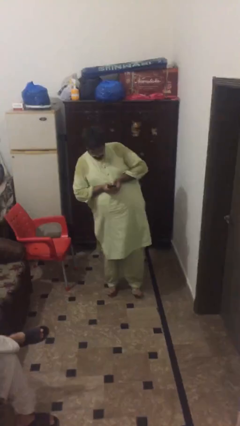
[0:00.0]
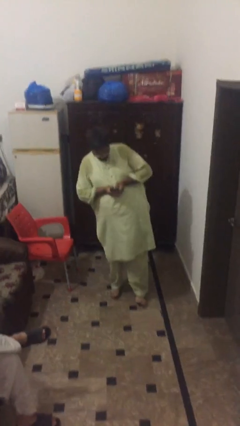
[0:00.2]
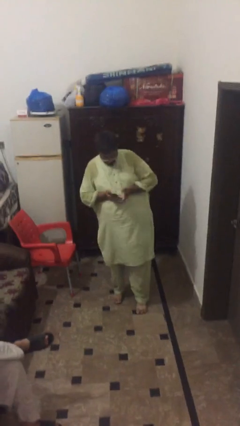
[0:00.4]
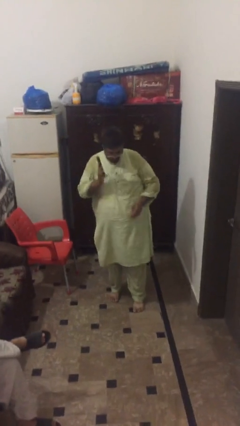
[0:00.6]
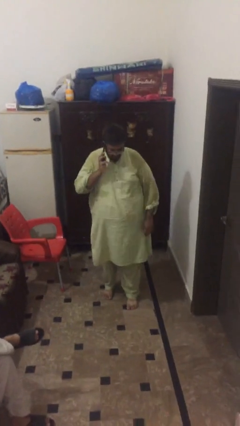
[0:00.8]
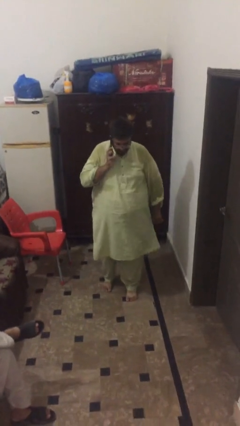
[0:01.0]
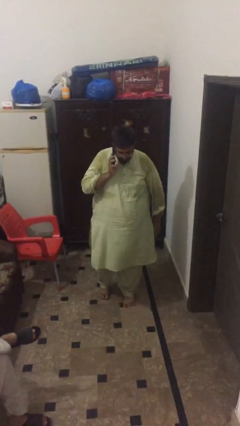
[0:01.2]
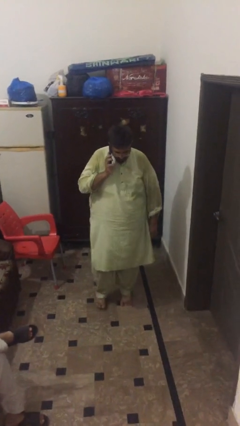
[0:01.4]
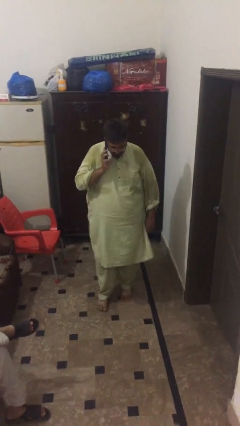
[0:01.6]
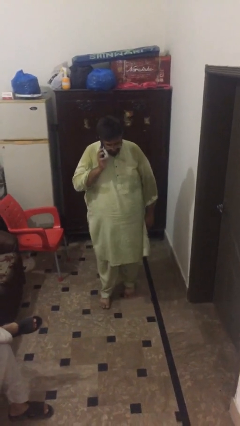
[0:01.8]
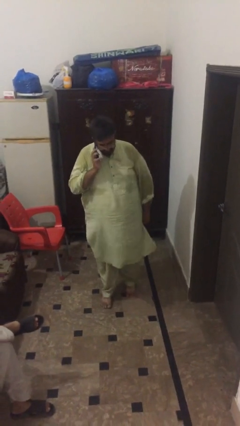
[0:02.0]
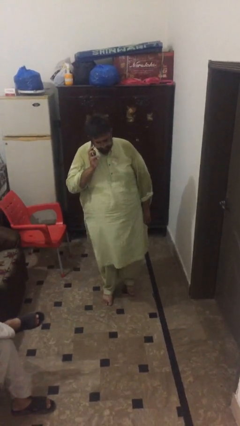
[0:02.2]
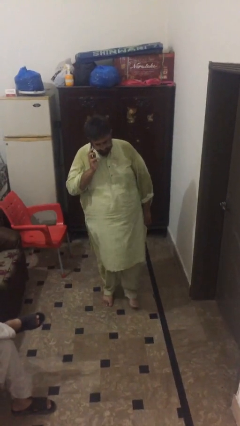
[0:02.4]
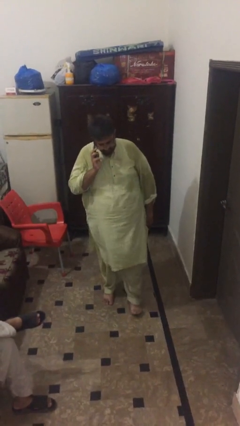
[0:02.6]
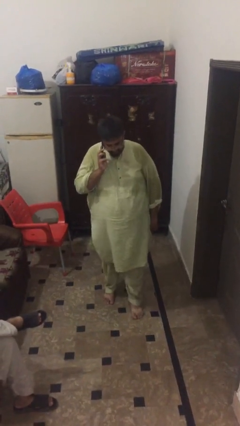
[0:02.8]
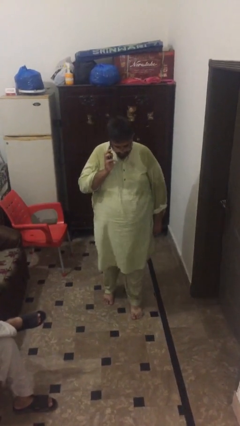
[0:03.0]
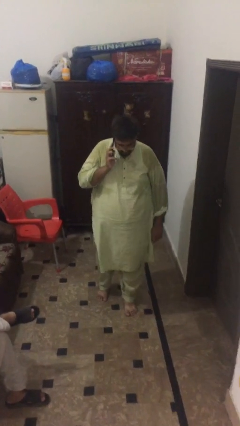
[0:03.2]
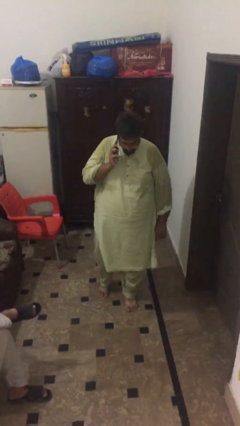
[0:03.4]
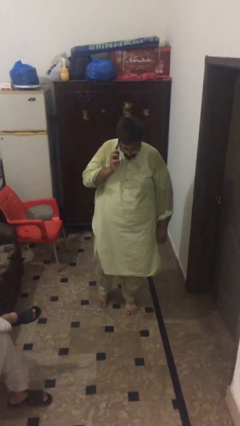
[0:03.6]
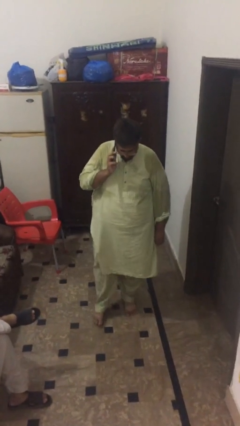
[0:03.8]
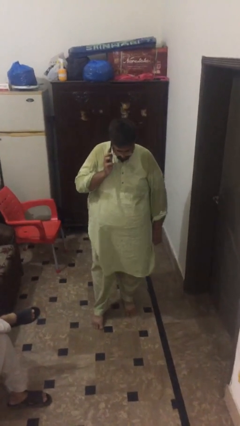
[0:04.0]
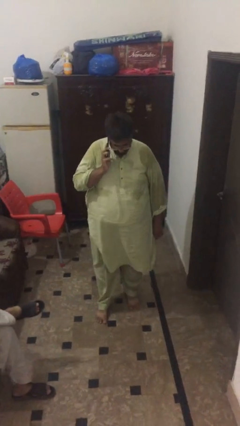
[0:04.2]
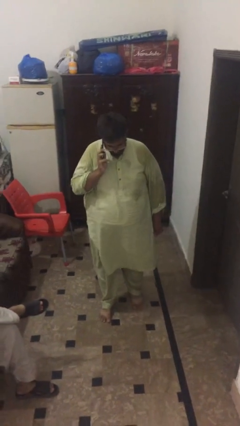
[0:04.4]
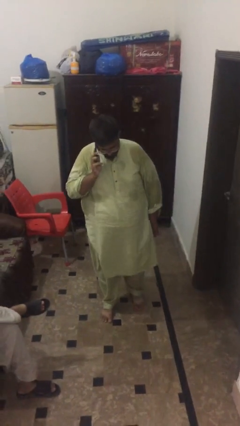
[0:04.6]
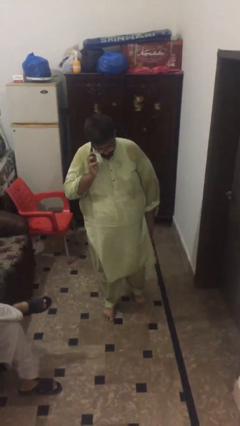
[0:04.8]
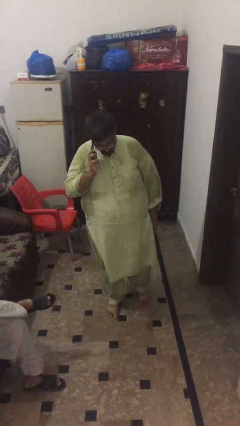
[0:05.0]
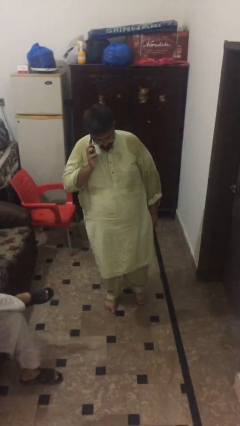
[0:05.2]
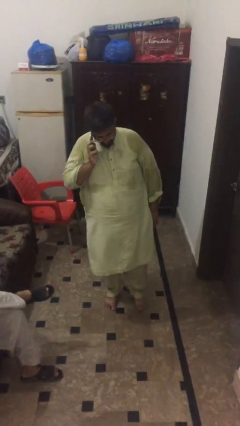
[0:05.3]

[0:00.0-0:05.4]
person talks on phone

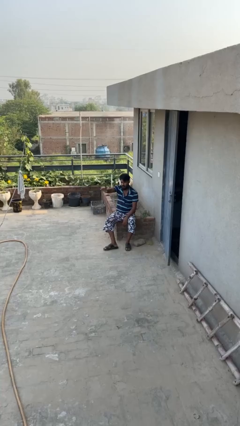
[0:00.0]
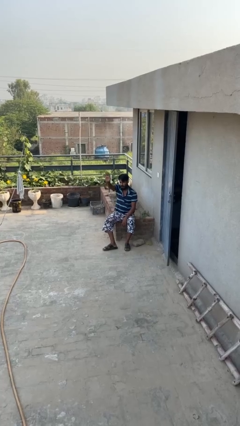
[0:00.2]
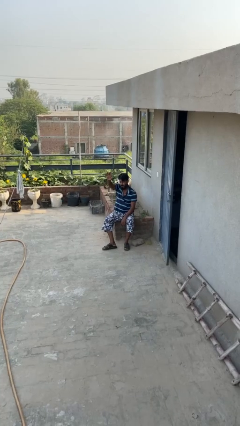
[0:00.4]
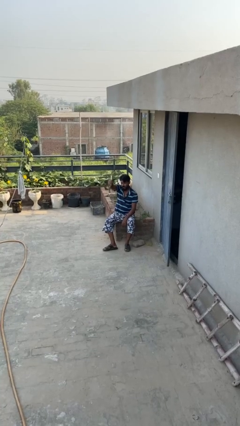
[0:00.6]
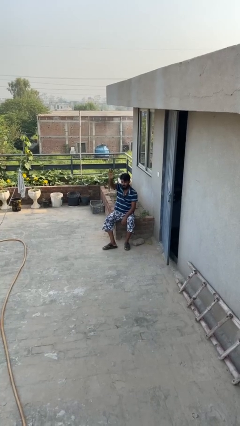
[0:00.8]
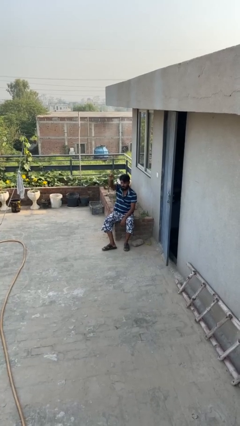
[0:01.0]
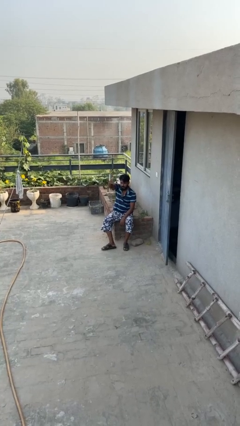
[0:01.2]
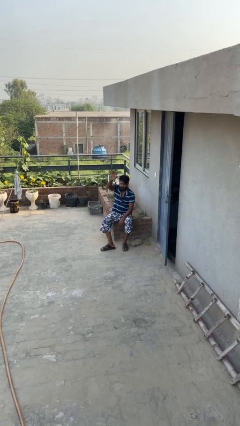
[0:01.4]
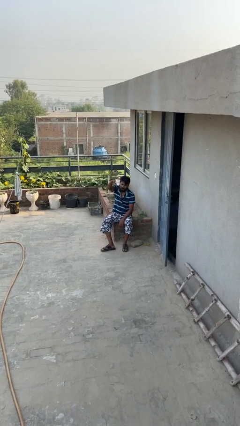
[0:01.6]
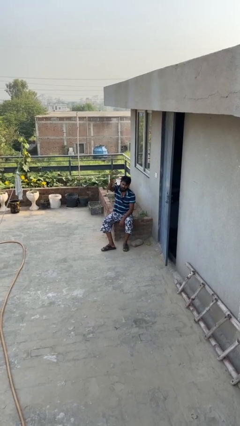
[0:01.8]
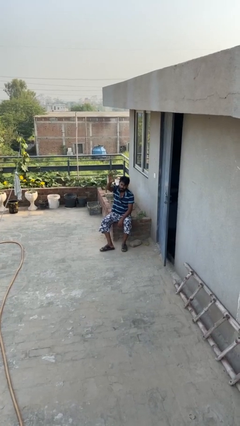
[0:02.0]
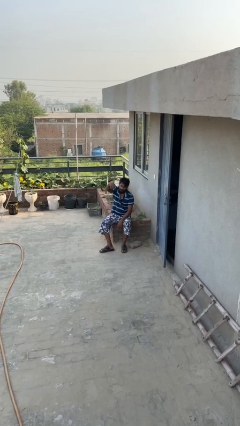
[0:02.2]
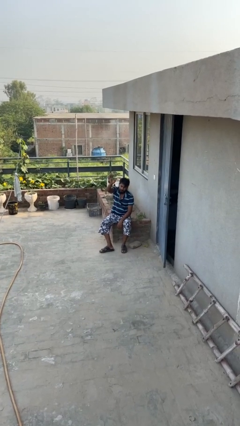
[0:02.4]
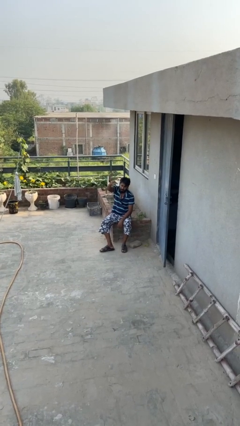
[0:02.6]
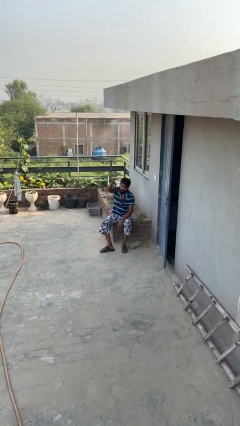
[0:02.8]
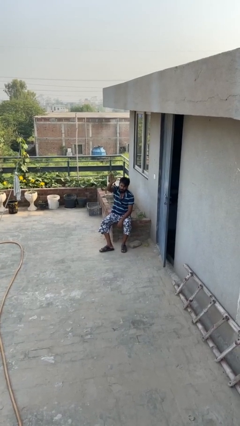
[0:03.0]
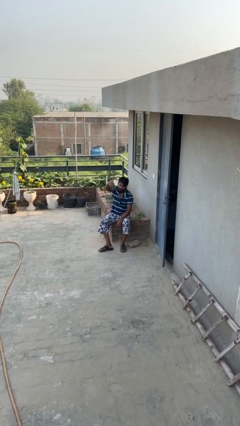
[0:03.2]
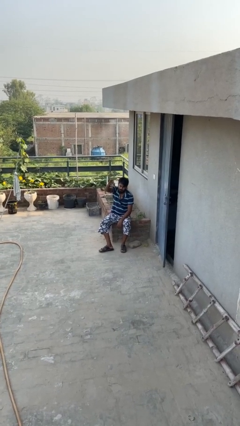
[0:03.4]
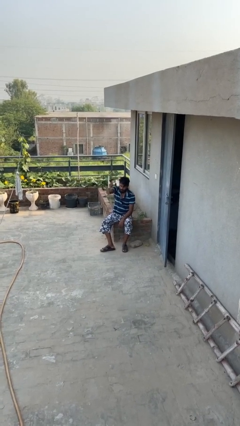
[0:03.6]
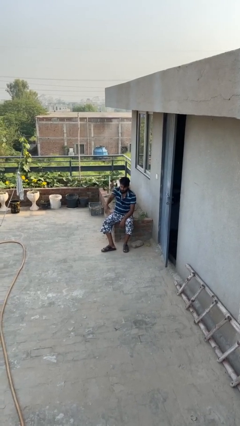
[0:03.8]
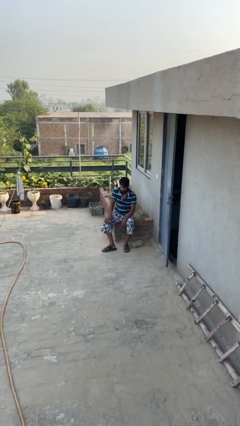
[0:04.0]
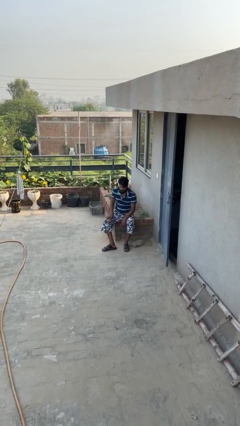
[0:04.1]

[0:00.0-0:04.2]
person gestures come here

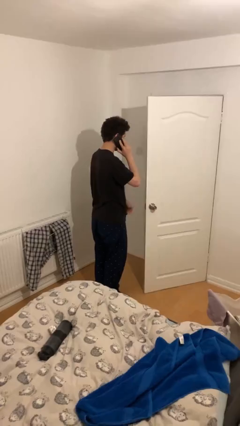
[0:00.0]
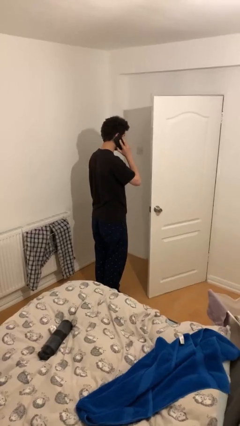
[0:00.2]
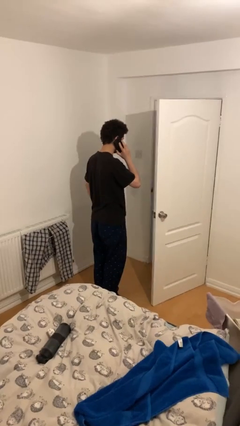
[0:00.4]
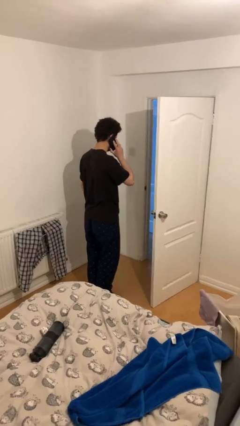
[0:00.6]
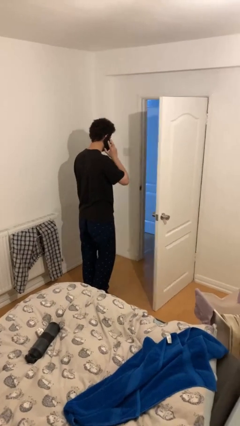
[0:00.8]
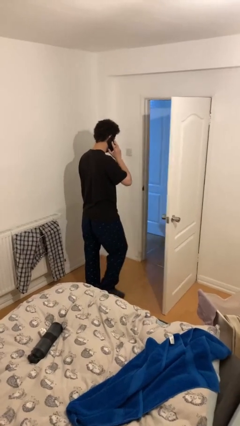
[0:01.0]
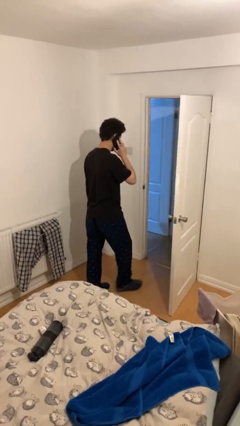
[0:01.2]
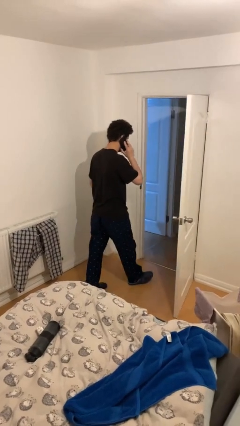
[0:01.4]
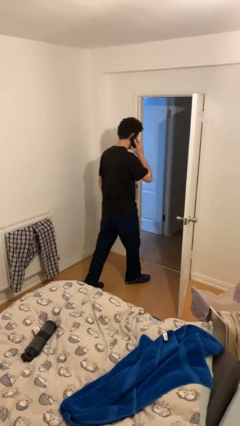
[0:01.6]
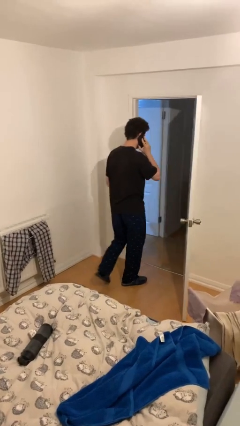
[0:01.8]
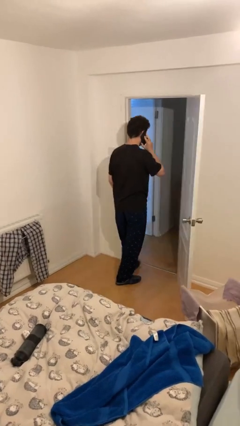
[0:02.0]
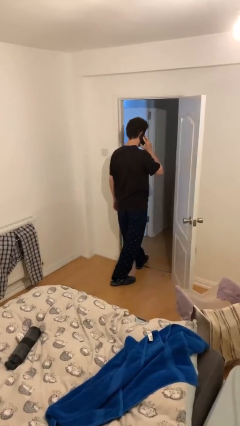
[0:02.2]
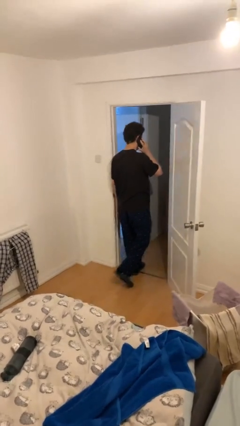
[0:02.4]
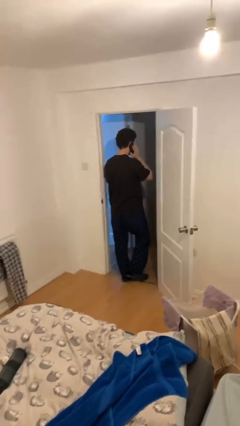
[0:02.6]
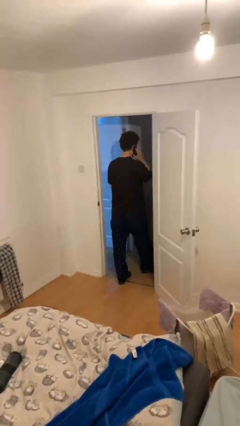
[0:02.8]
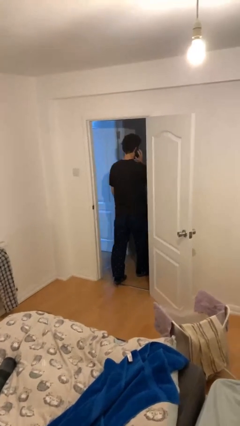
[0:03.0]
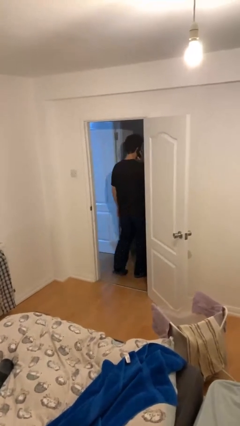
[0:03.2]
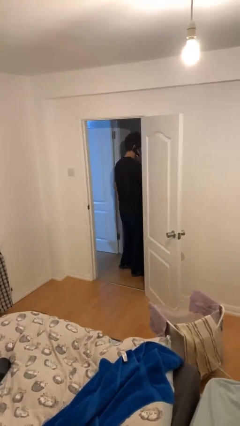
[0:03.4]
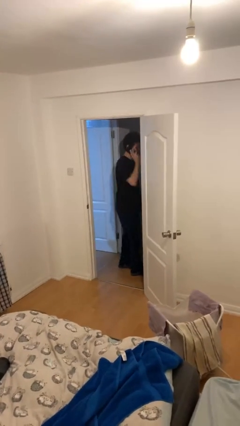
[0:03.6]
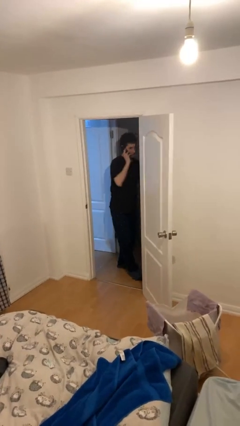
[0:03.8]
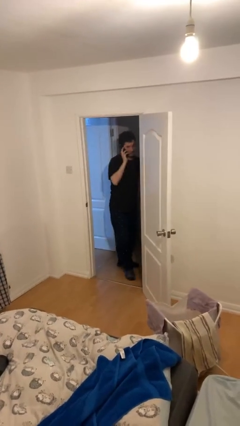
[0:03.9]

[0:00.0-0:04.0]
person exits scene through structure

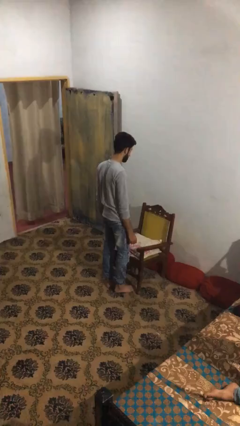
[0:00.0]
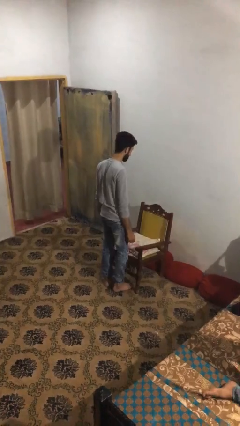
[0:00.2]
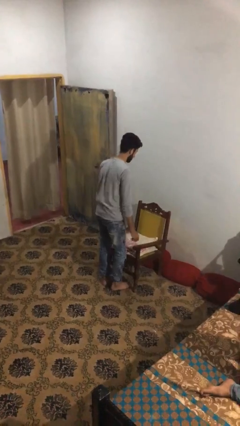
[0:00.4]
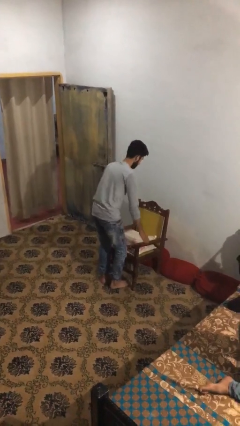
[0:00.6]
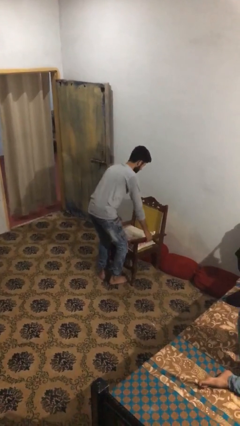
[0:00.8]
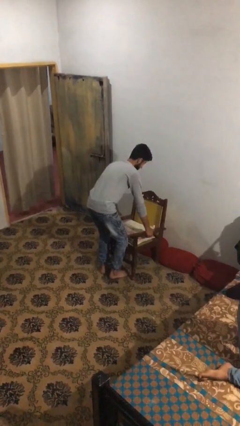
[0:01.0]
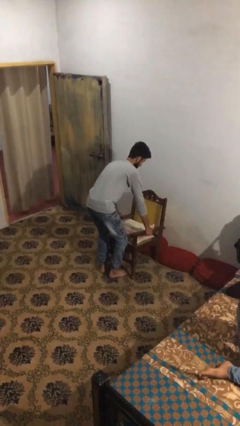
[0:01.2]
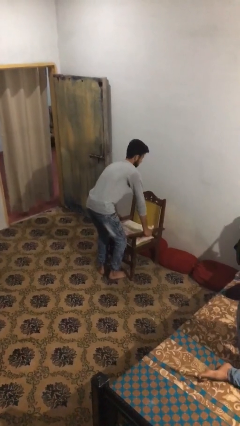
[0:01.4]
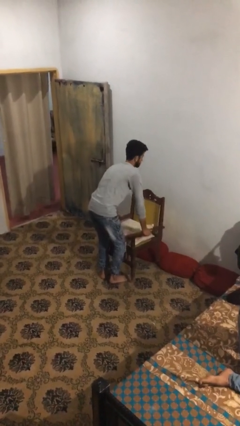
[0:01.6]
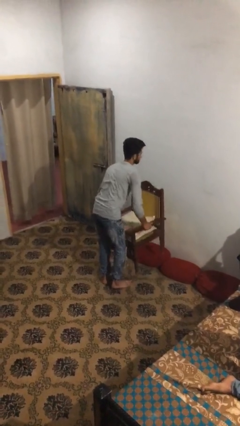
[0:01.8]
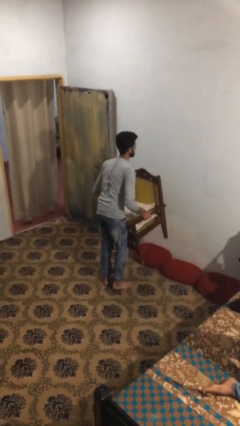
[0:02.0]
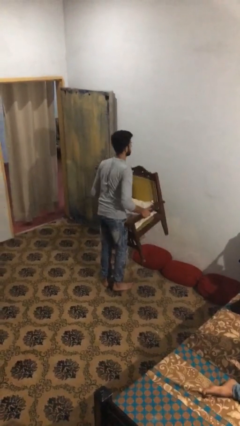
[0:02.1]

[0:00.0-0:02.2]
person picks up object from floor

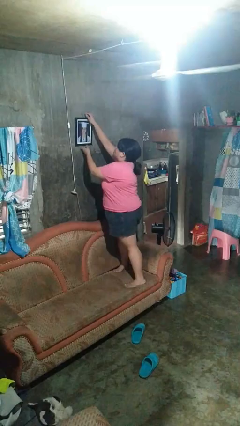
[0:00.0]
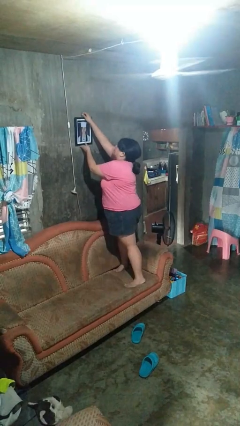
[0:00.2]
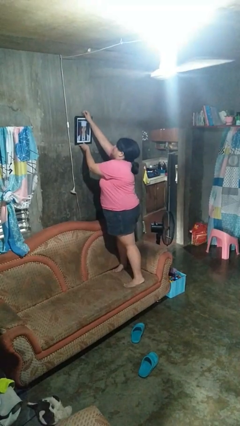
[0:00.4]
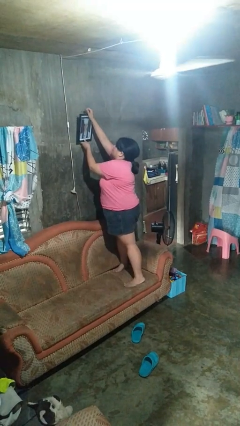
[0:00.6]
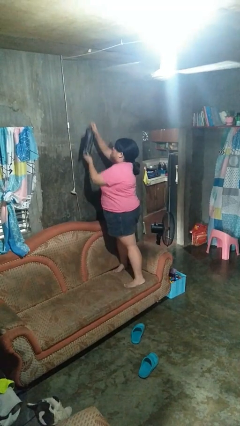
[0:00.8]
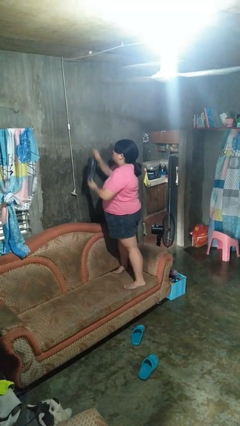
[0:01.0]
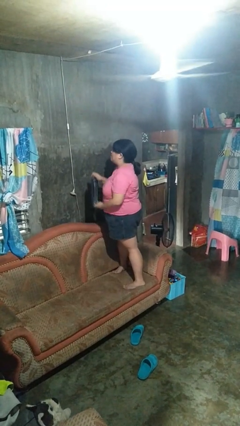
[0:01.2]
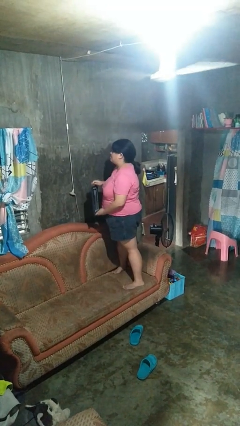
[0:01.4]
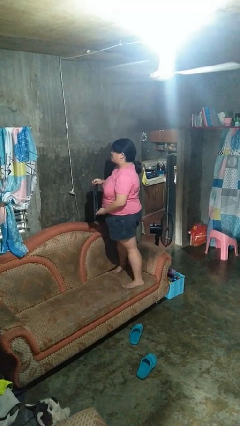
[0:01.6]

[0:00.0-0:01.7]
person takes down picture frame

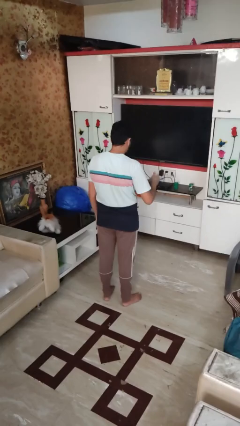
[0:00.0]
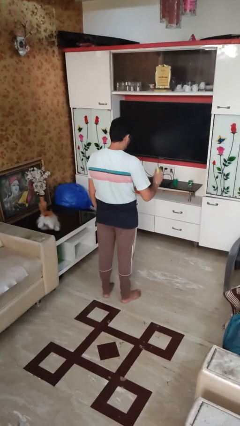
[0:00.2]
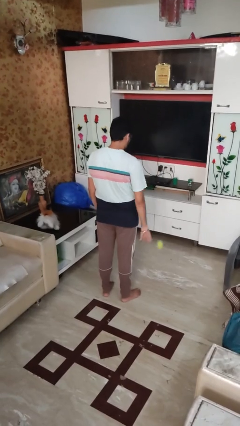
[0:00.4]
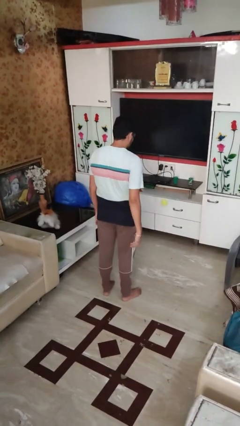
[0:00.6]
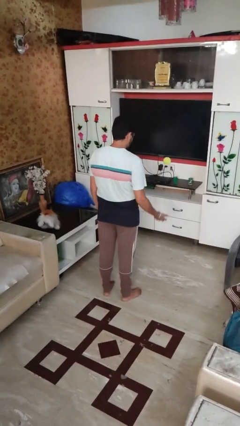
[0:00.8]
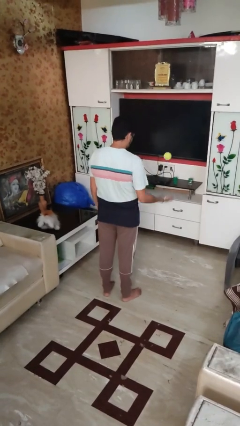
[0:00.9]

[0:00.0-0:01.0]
person bounces ball on floor
